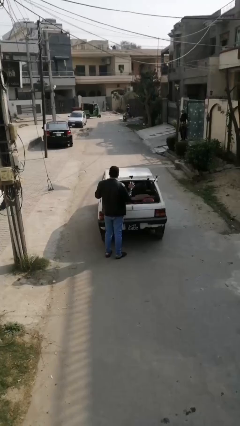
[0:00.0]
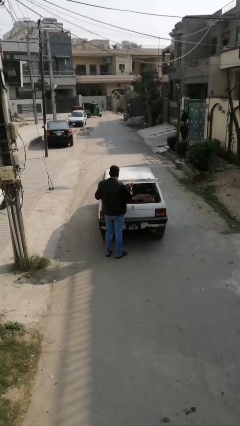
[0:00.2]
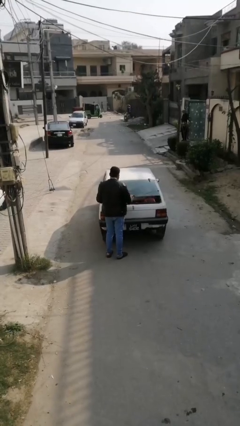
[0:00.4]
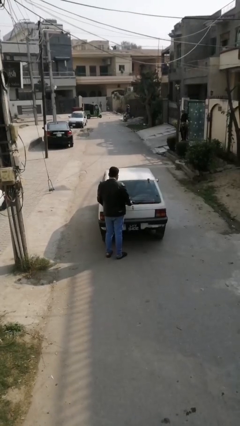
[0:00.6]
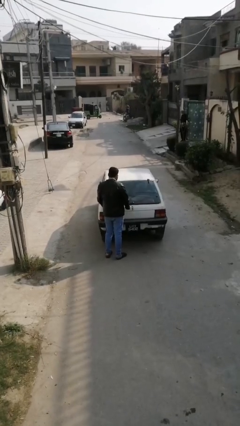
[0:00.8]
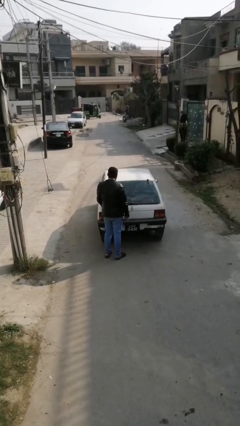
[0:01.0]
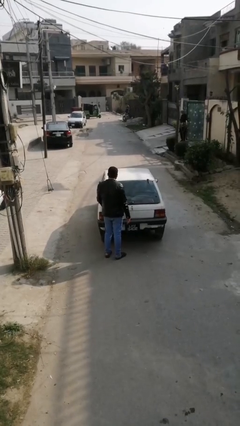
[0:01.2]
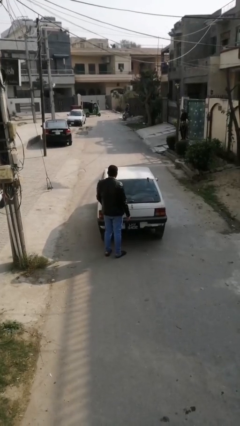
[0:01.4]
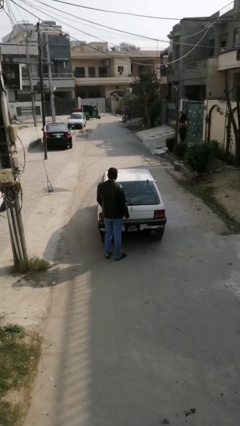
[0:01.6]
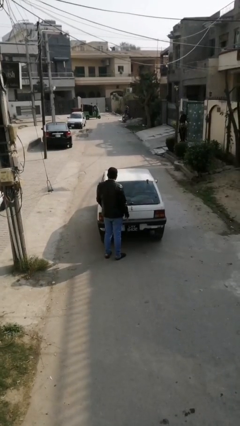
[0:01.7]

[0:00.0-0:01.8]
person closes car trunk

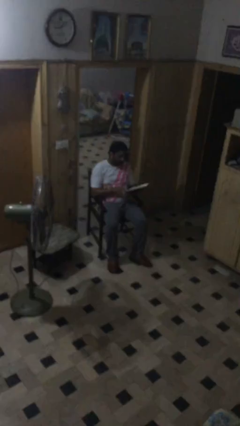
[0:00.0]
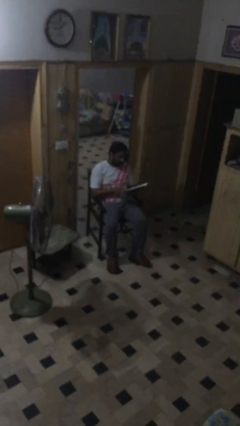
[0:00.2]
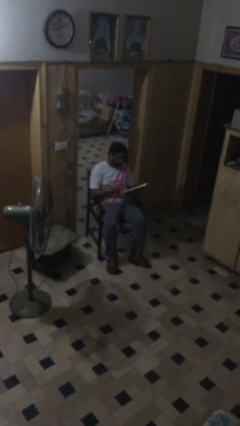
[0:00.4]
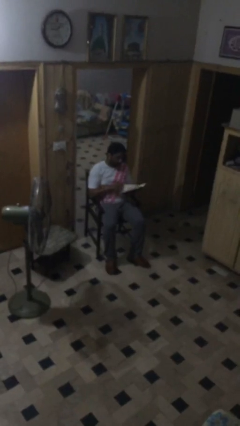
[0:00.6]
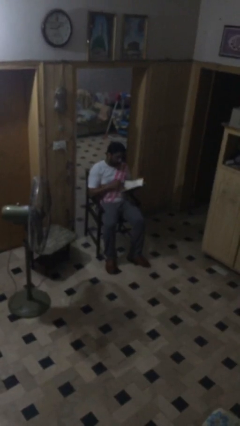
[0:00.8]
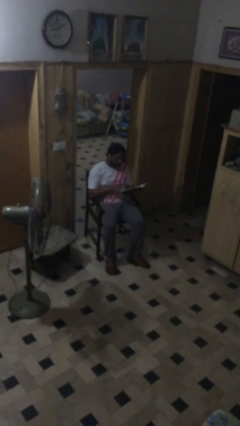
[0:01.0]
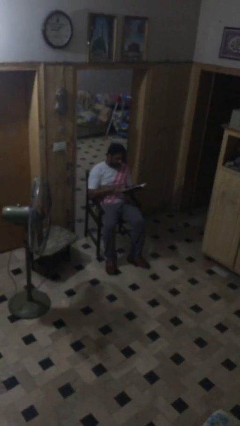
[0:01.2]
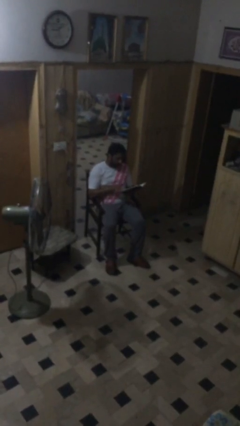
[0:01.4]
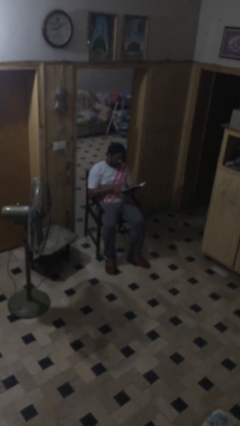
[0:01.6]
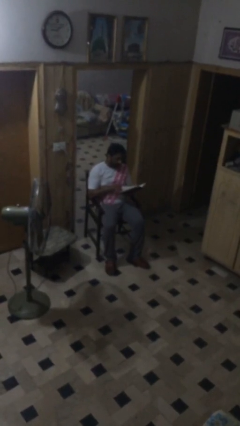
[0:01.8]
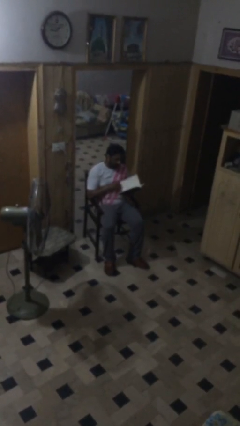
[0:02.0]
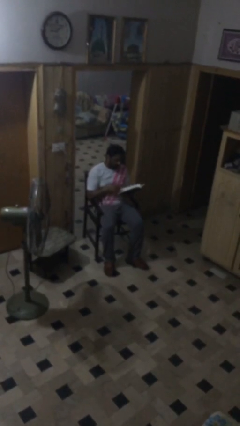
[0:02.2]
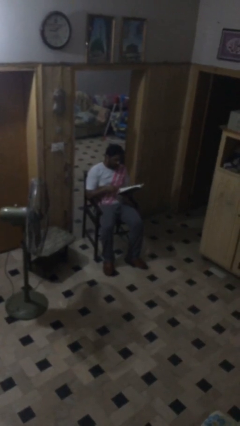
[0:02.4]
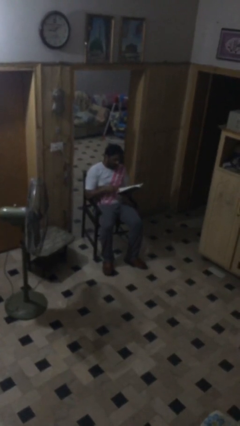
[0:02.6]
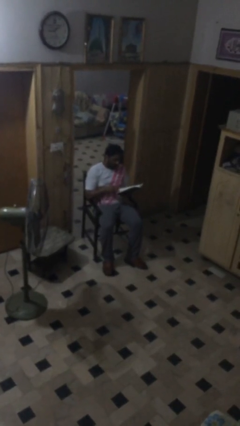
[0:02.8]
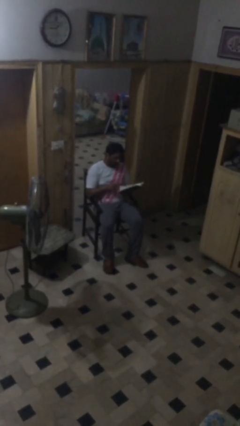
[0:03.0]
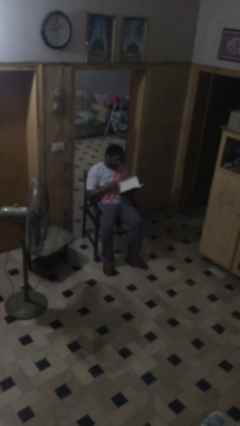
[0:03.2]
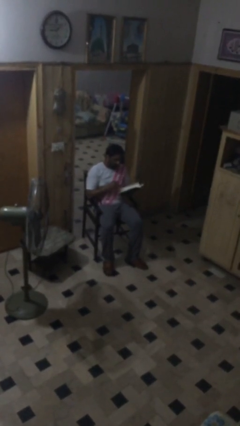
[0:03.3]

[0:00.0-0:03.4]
person reads document

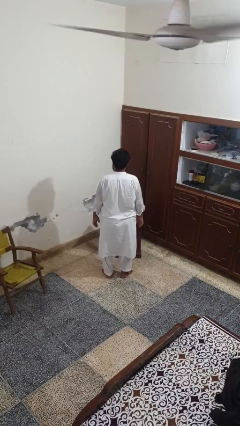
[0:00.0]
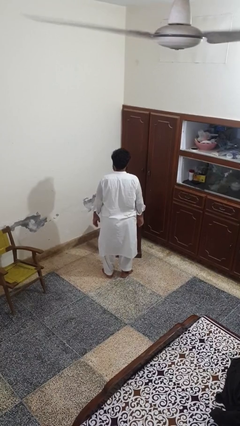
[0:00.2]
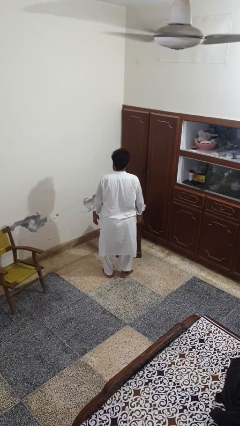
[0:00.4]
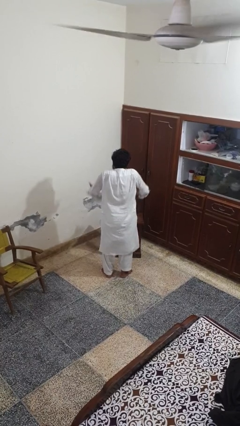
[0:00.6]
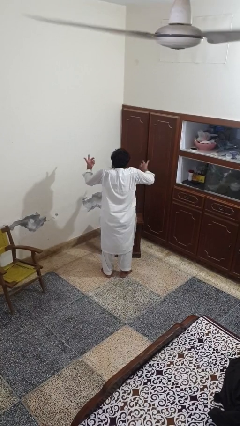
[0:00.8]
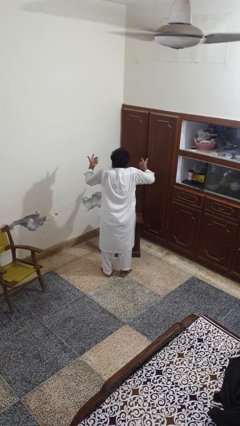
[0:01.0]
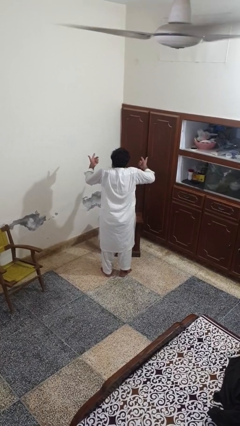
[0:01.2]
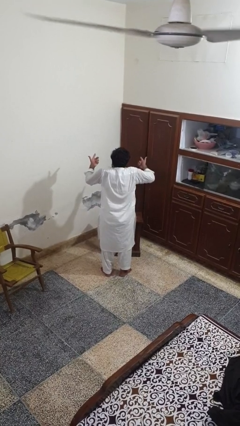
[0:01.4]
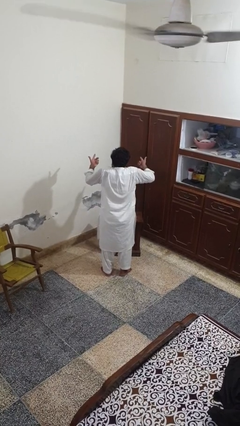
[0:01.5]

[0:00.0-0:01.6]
person shrugs

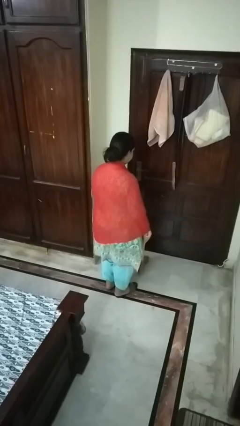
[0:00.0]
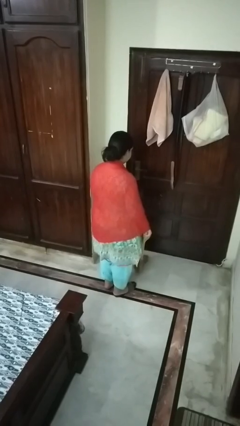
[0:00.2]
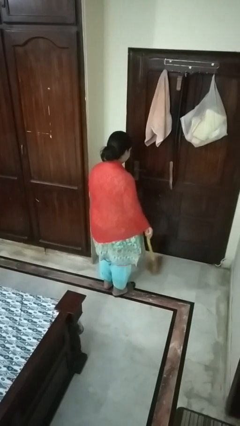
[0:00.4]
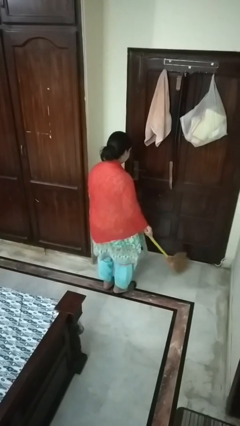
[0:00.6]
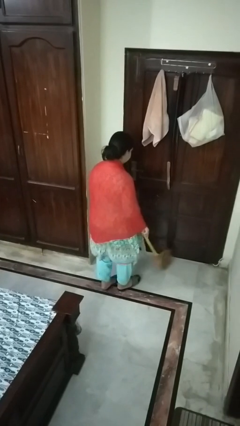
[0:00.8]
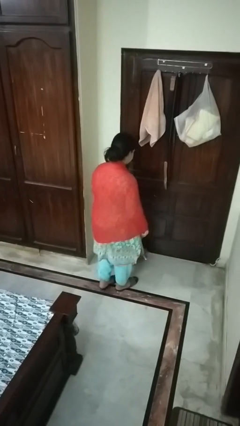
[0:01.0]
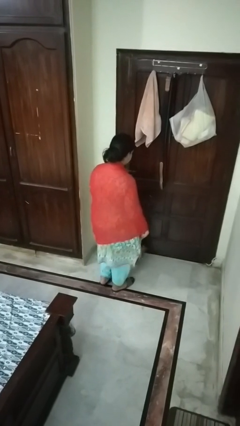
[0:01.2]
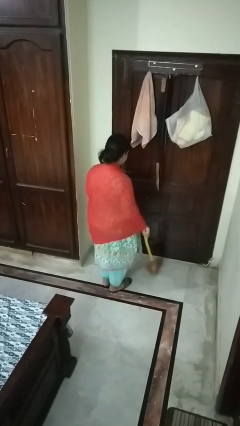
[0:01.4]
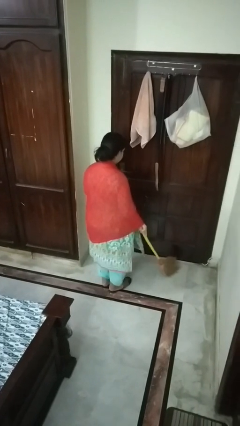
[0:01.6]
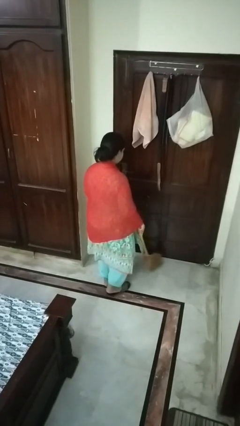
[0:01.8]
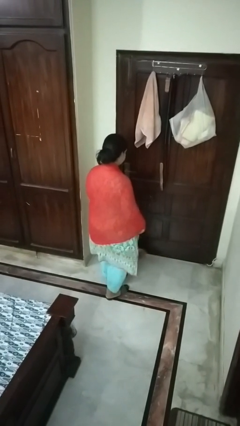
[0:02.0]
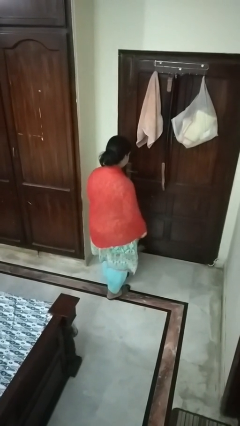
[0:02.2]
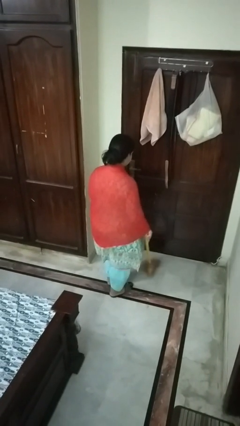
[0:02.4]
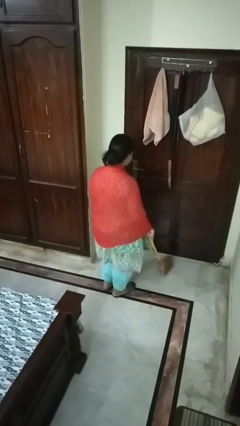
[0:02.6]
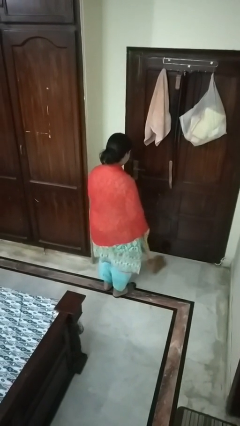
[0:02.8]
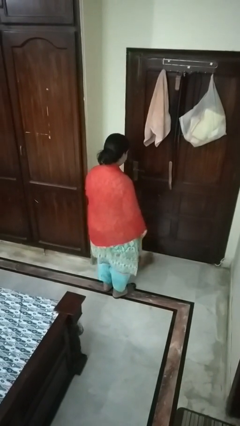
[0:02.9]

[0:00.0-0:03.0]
person sweeps floor

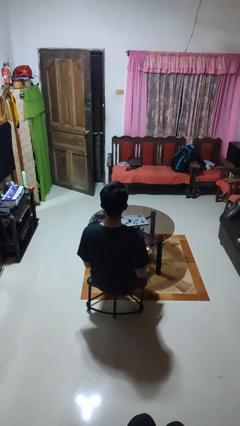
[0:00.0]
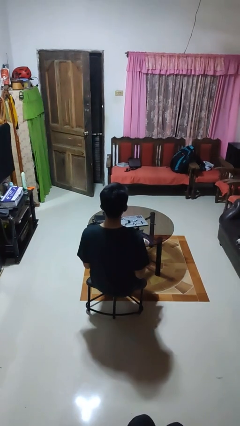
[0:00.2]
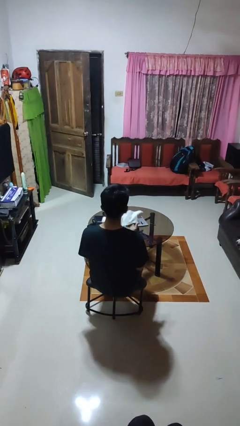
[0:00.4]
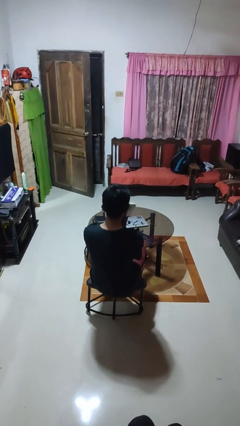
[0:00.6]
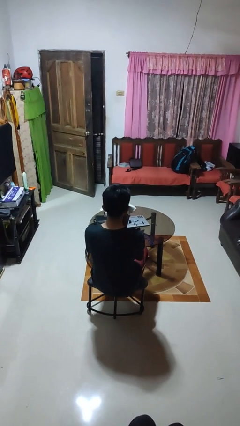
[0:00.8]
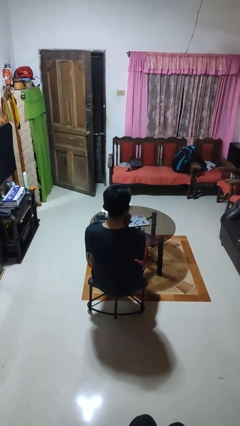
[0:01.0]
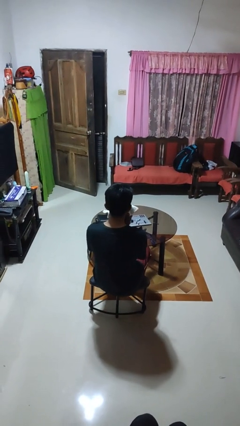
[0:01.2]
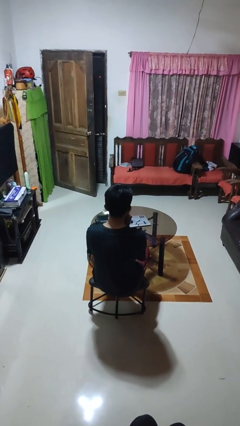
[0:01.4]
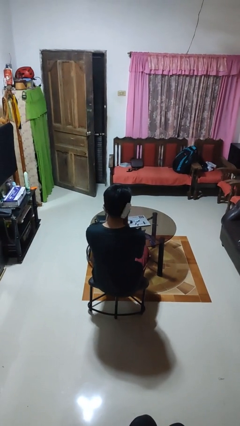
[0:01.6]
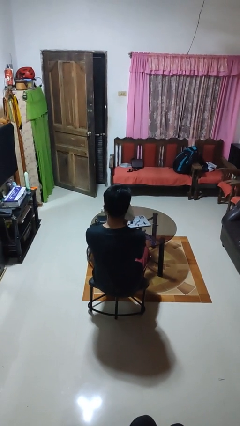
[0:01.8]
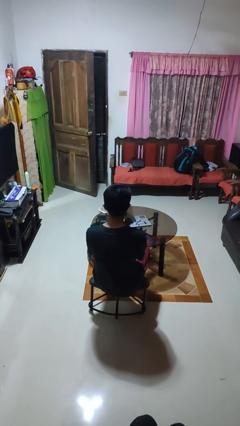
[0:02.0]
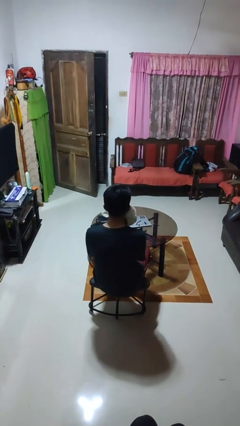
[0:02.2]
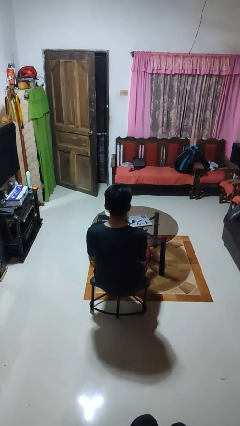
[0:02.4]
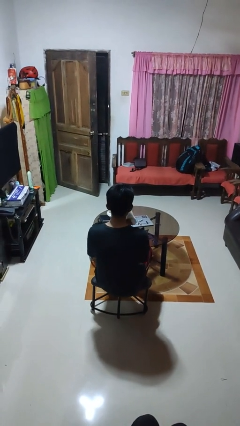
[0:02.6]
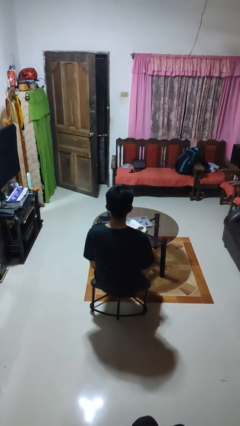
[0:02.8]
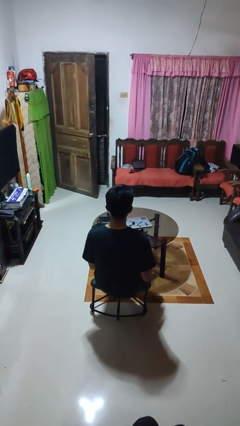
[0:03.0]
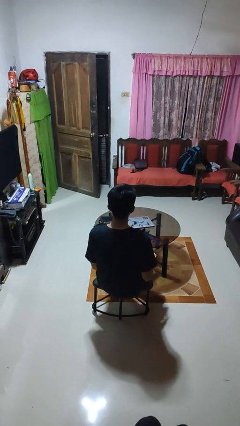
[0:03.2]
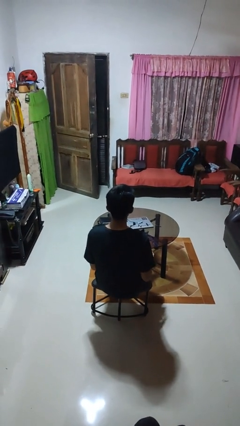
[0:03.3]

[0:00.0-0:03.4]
person wipes mouth with napkin

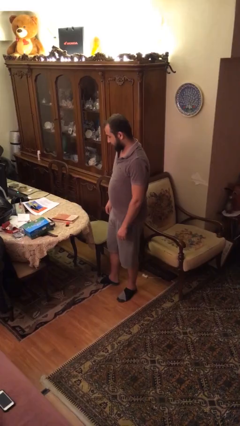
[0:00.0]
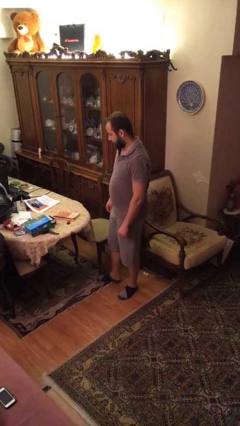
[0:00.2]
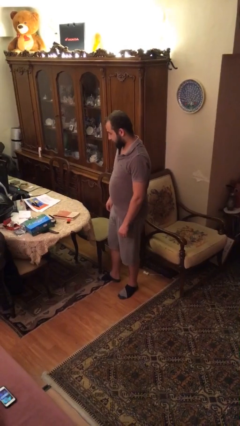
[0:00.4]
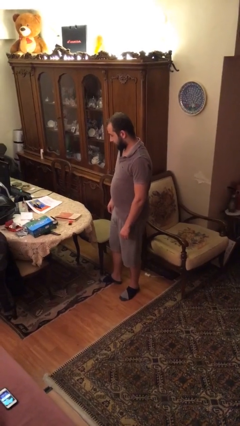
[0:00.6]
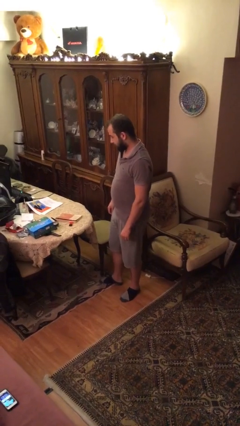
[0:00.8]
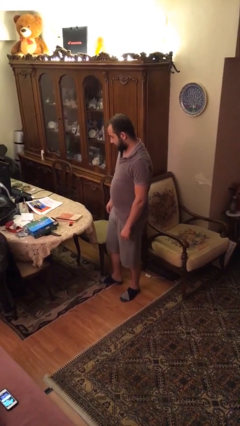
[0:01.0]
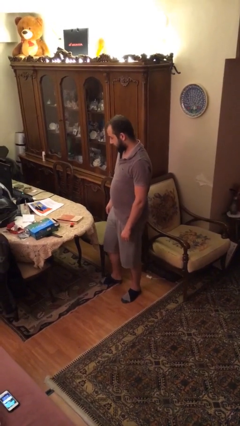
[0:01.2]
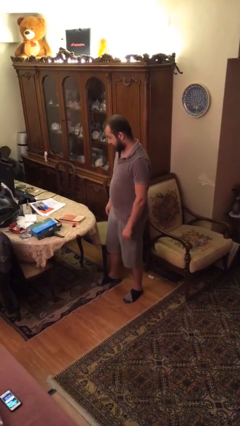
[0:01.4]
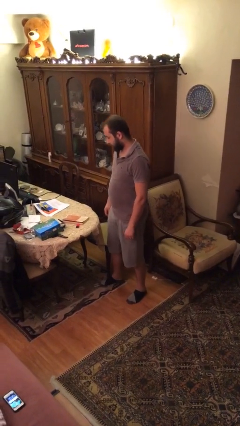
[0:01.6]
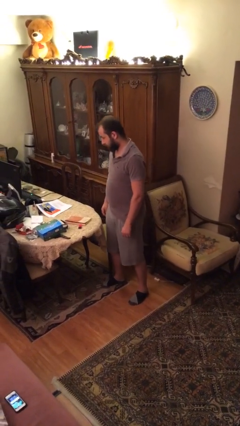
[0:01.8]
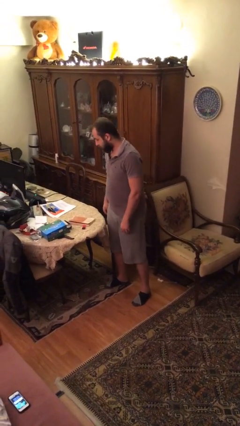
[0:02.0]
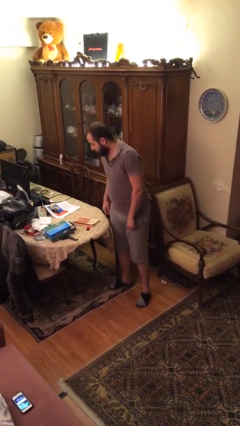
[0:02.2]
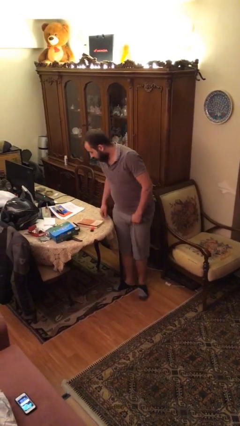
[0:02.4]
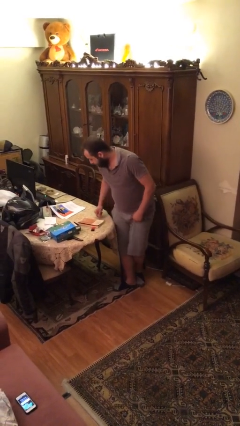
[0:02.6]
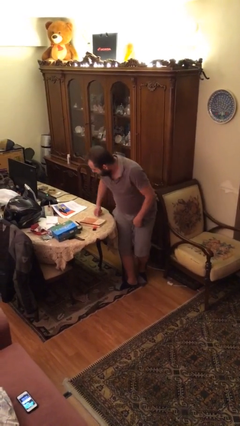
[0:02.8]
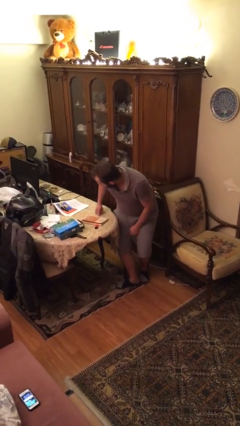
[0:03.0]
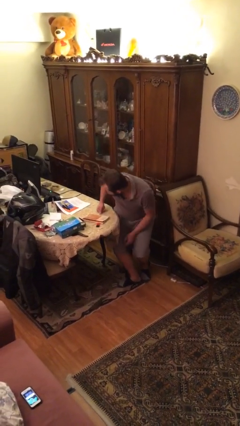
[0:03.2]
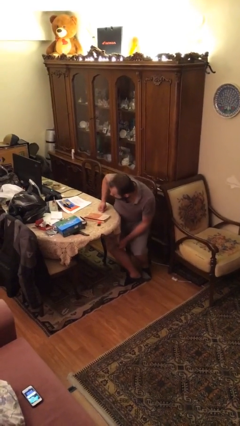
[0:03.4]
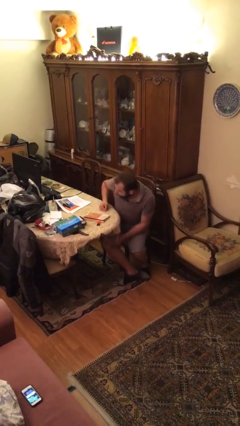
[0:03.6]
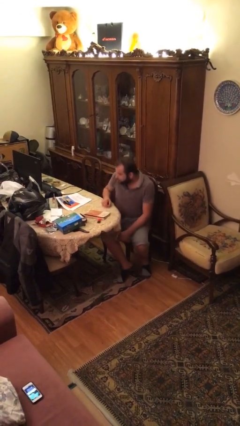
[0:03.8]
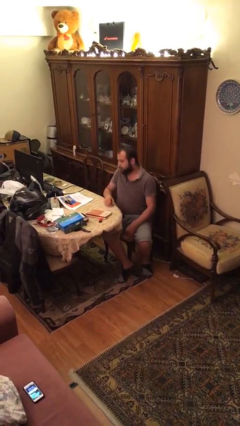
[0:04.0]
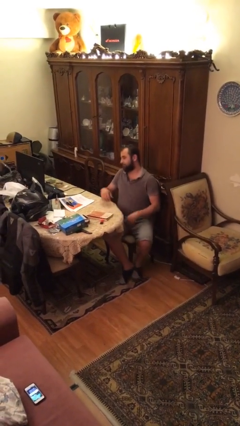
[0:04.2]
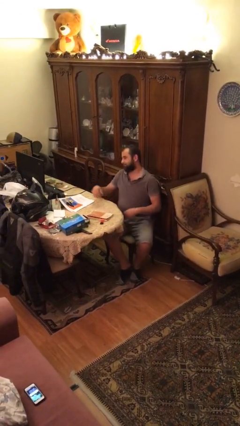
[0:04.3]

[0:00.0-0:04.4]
person sits down
